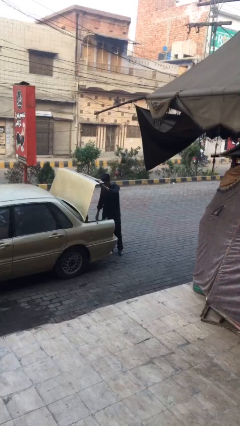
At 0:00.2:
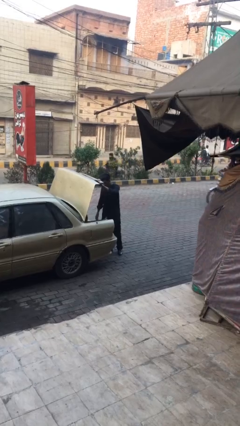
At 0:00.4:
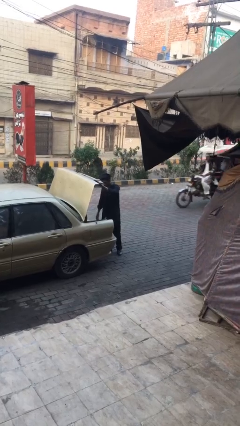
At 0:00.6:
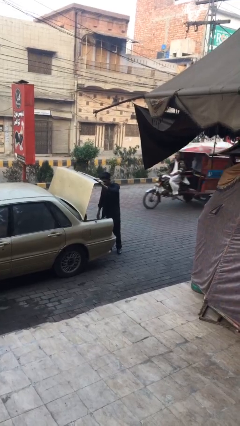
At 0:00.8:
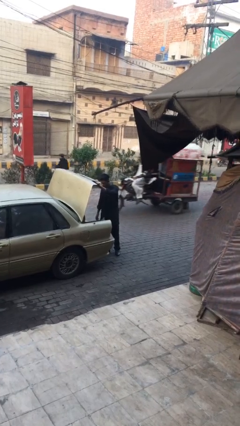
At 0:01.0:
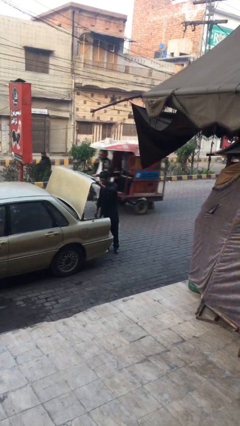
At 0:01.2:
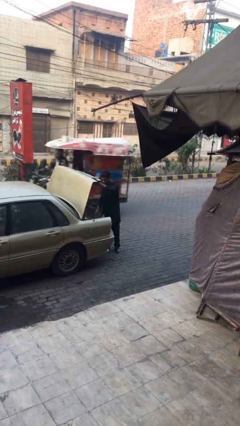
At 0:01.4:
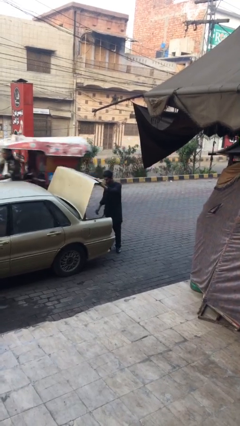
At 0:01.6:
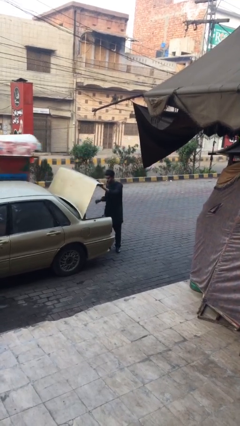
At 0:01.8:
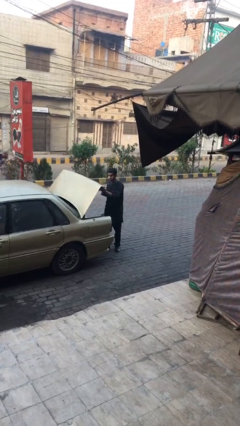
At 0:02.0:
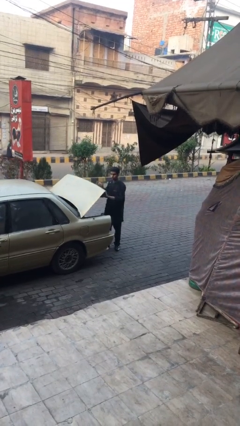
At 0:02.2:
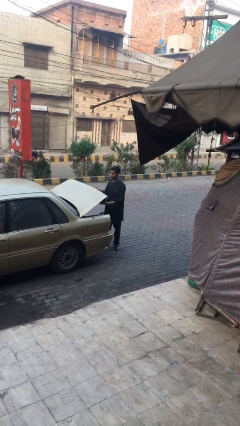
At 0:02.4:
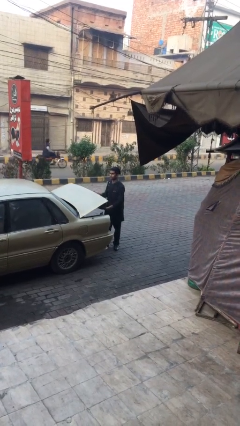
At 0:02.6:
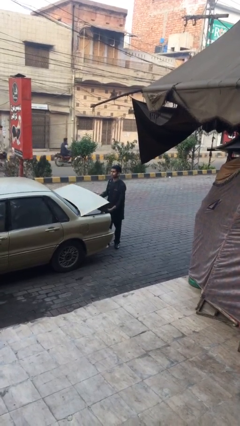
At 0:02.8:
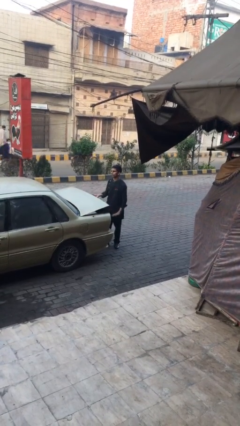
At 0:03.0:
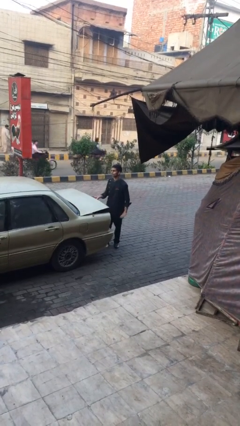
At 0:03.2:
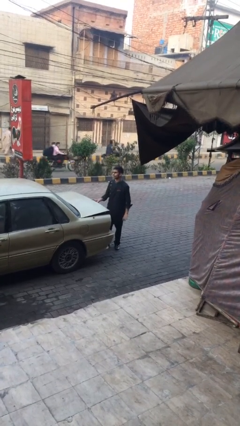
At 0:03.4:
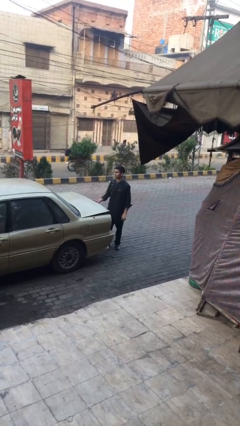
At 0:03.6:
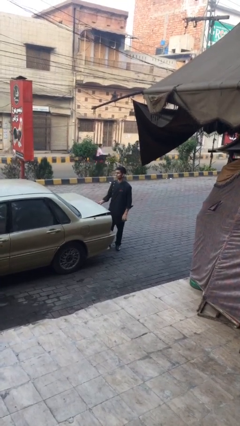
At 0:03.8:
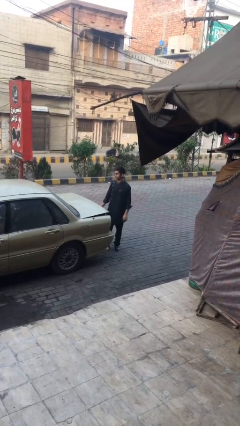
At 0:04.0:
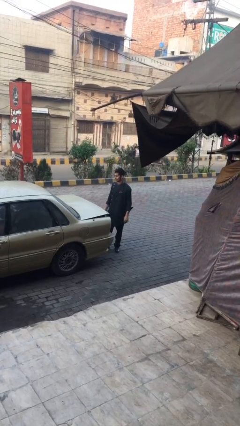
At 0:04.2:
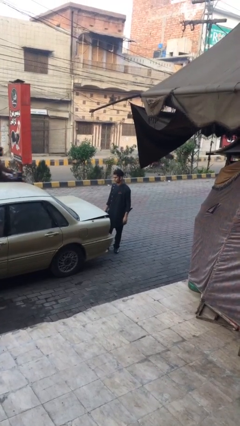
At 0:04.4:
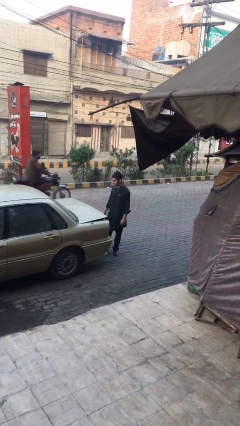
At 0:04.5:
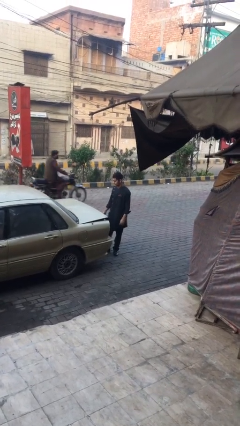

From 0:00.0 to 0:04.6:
person closes car trunk

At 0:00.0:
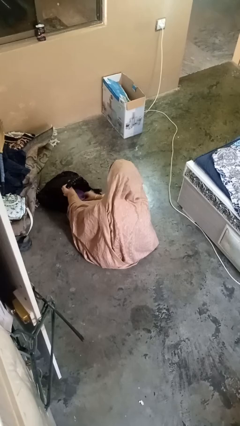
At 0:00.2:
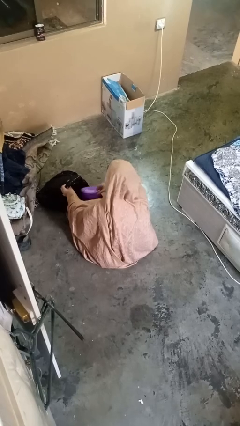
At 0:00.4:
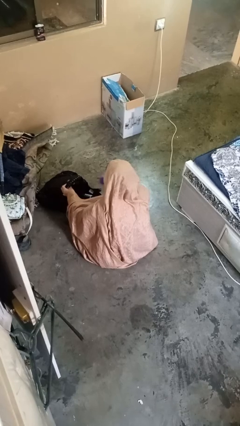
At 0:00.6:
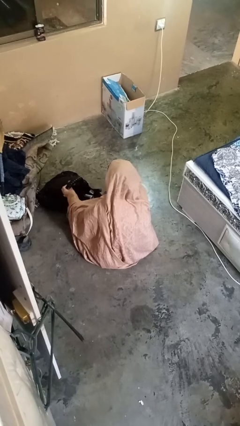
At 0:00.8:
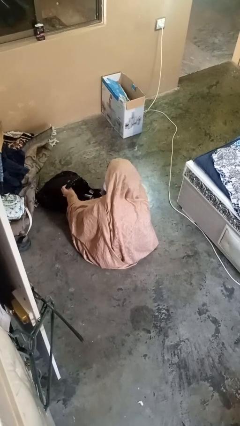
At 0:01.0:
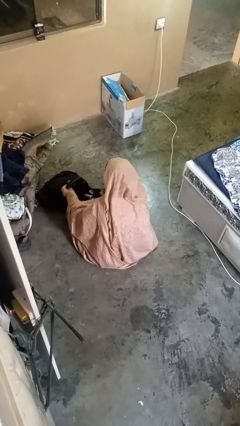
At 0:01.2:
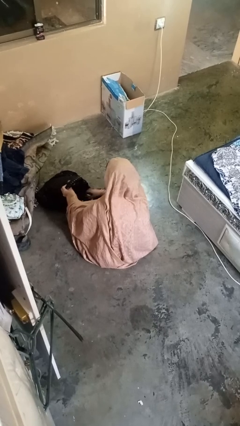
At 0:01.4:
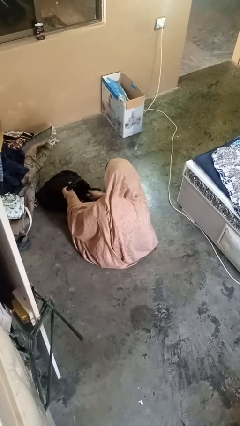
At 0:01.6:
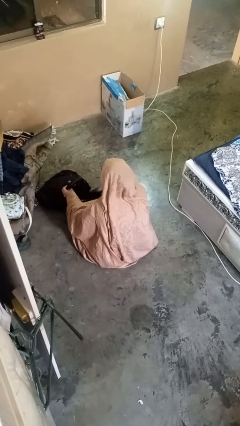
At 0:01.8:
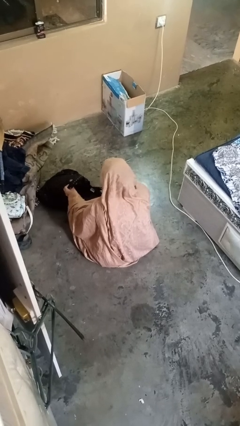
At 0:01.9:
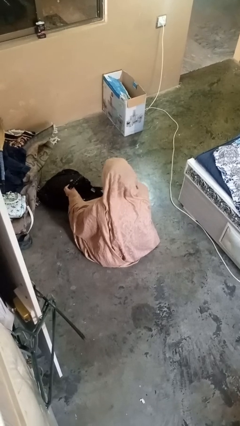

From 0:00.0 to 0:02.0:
person takes object from backpack

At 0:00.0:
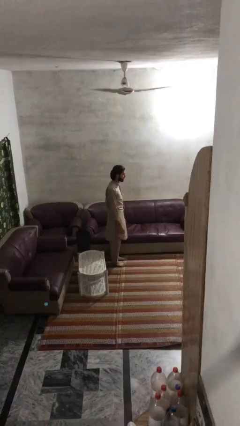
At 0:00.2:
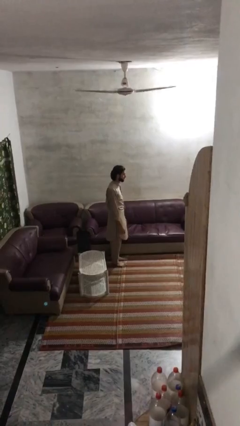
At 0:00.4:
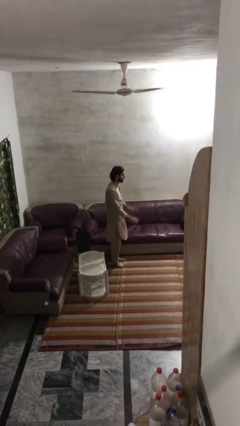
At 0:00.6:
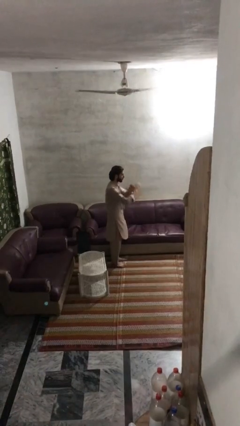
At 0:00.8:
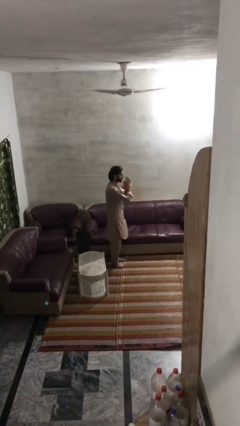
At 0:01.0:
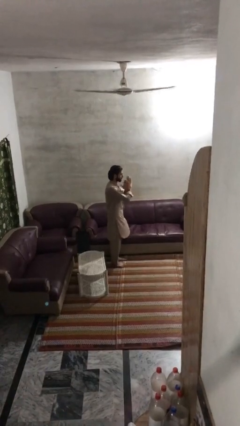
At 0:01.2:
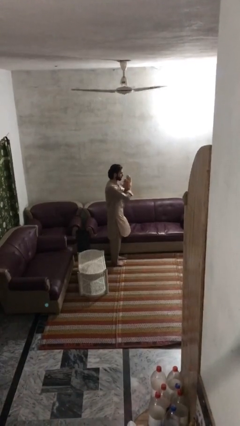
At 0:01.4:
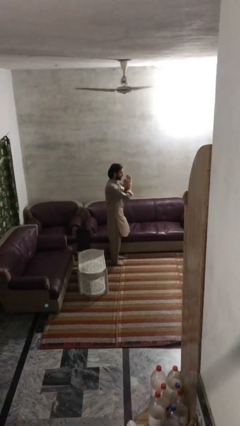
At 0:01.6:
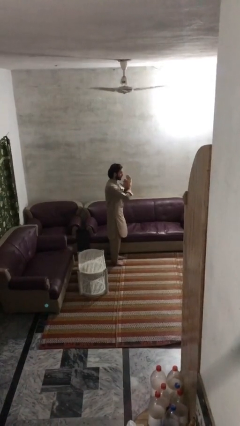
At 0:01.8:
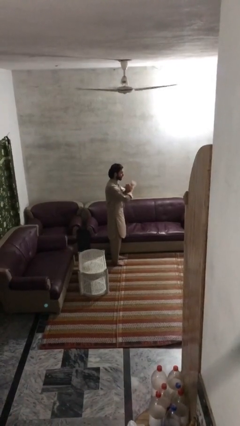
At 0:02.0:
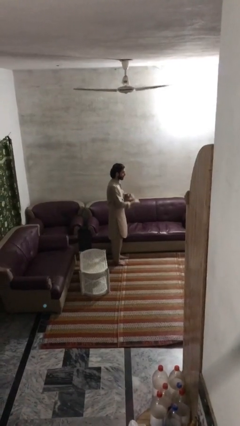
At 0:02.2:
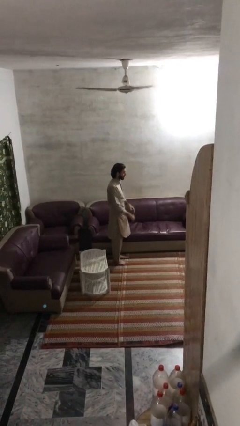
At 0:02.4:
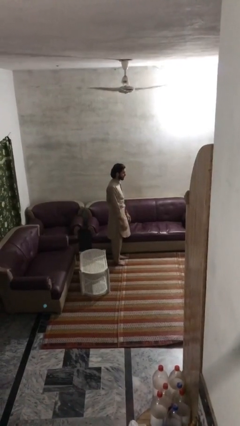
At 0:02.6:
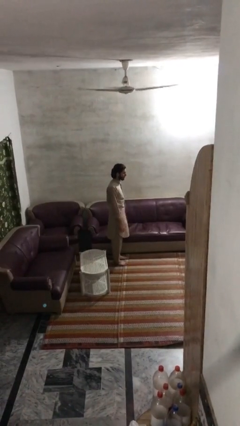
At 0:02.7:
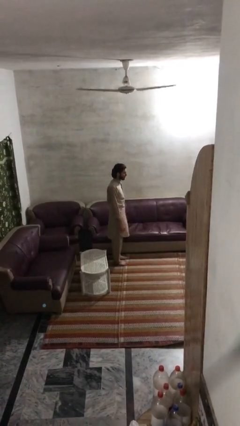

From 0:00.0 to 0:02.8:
person gestures arms x

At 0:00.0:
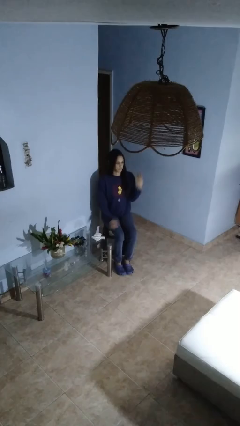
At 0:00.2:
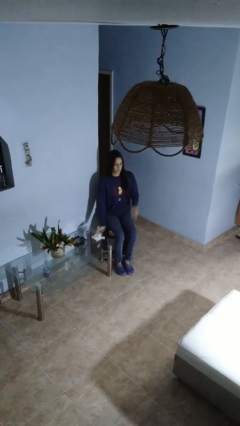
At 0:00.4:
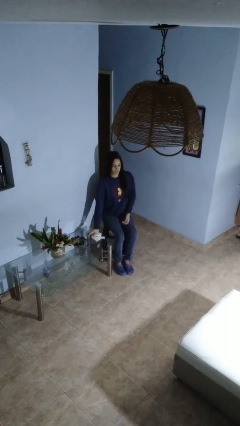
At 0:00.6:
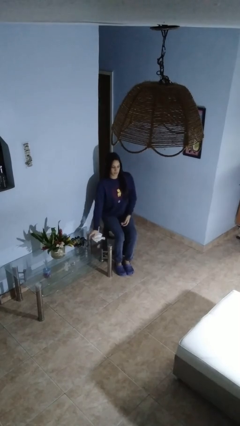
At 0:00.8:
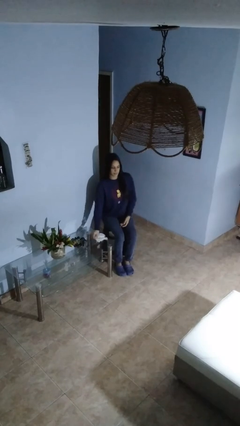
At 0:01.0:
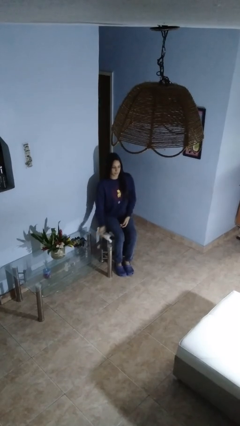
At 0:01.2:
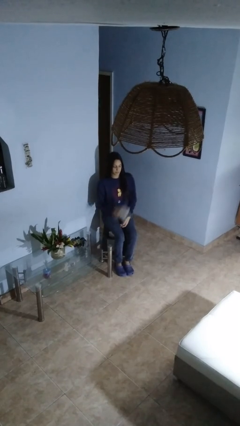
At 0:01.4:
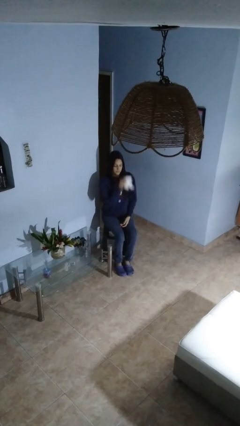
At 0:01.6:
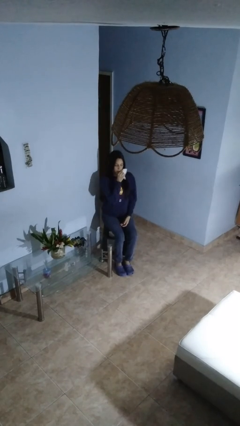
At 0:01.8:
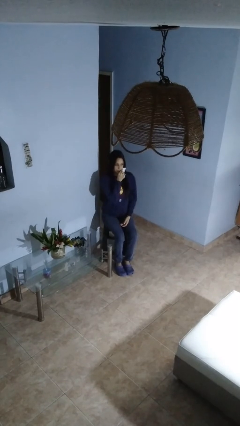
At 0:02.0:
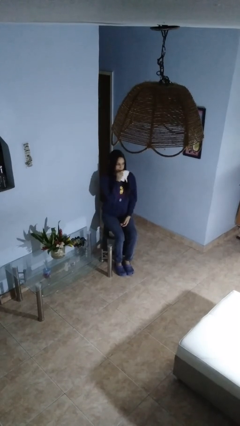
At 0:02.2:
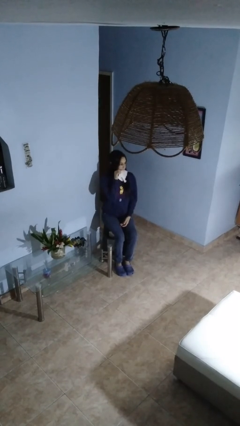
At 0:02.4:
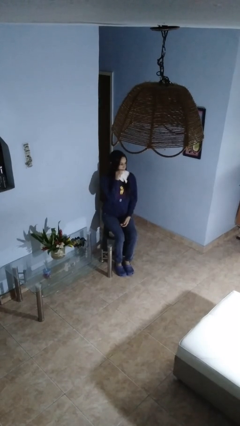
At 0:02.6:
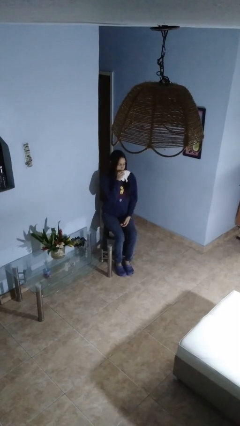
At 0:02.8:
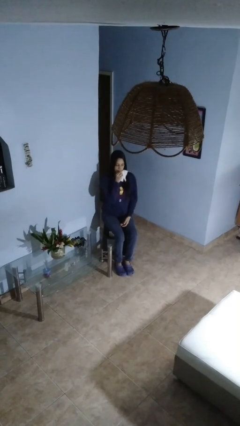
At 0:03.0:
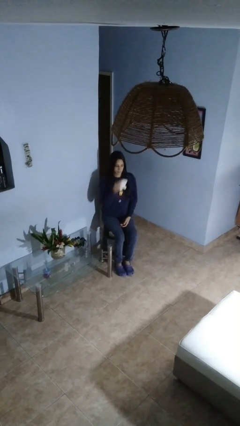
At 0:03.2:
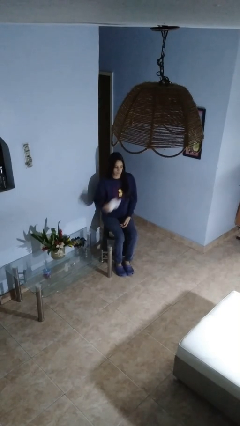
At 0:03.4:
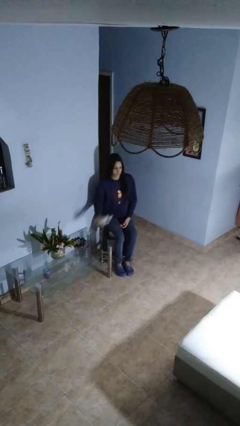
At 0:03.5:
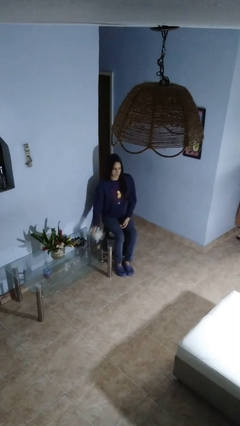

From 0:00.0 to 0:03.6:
person wipes mouth with napkin

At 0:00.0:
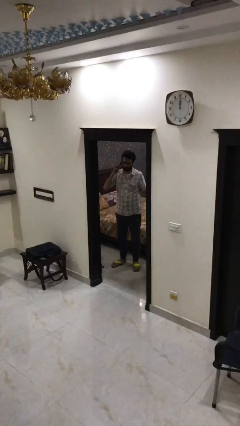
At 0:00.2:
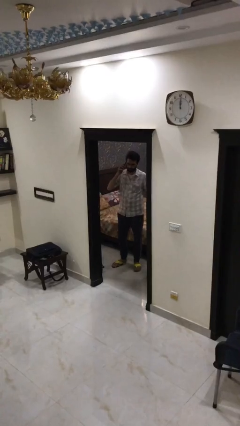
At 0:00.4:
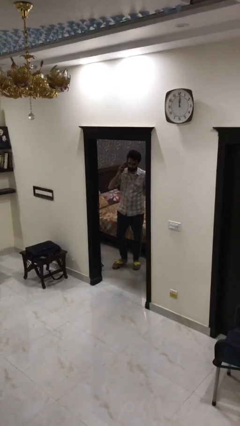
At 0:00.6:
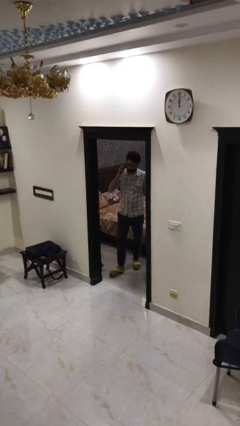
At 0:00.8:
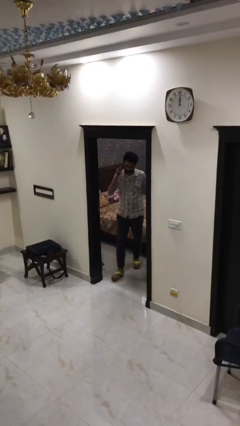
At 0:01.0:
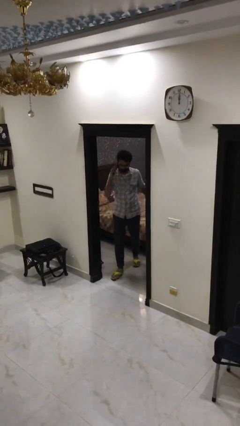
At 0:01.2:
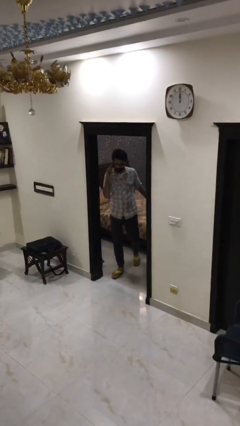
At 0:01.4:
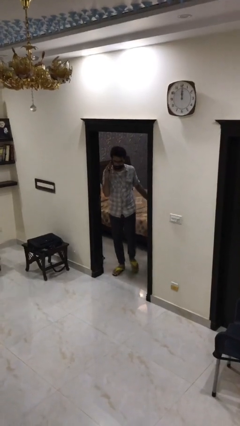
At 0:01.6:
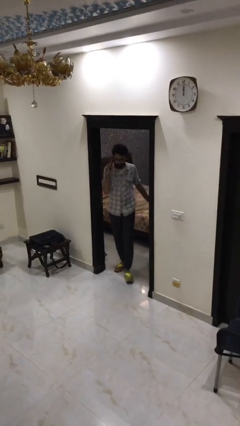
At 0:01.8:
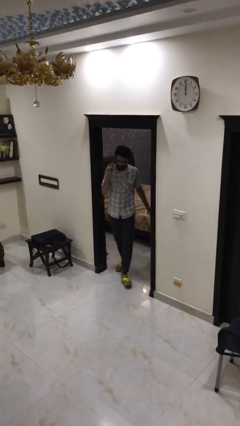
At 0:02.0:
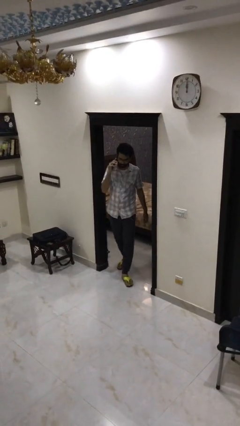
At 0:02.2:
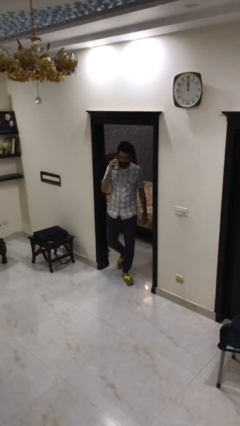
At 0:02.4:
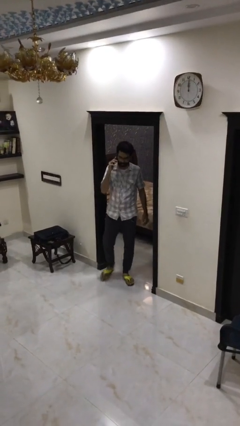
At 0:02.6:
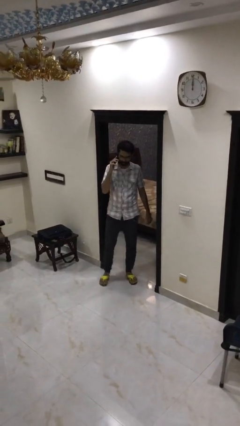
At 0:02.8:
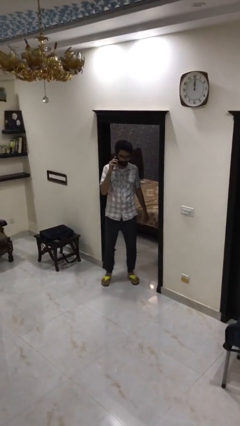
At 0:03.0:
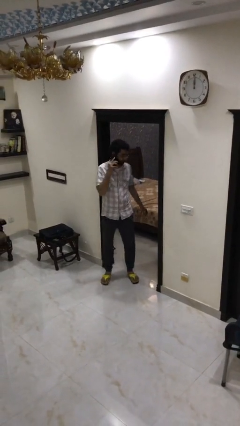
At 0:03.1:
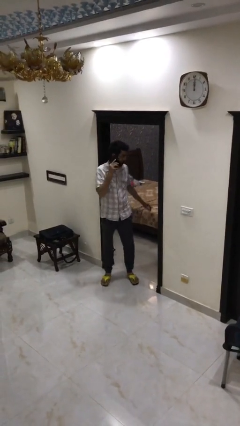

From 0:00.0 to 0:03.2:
person enters scene through structure

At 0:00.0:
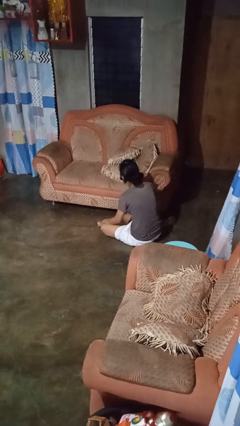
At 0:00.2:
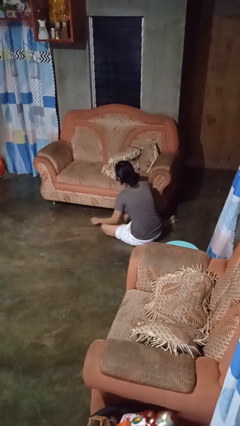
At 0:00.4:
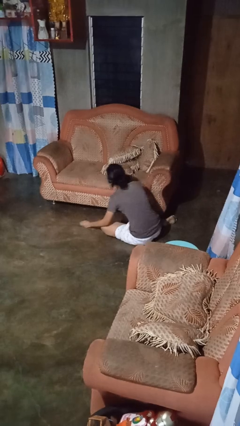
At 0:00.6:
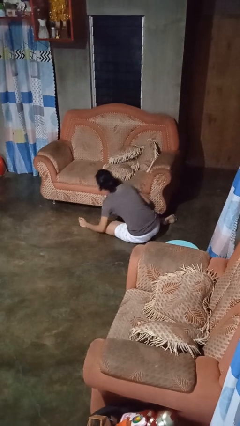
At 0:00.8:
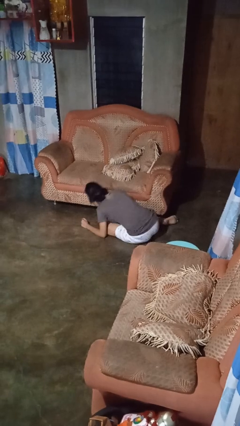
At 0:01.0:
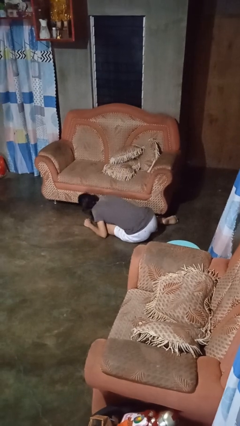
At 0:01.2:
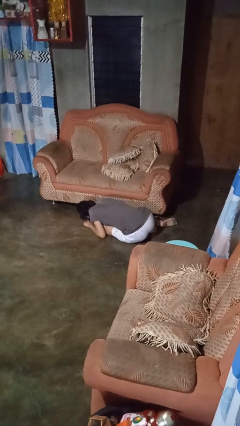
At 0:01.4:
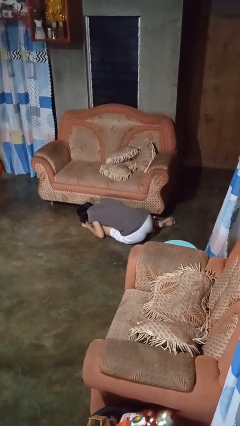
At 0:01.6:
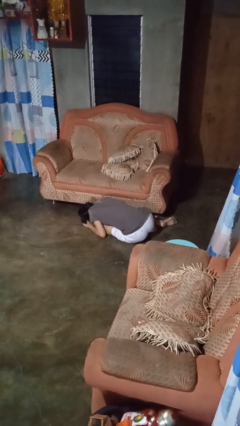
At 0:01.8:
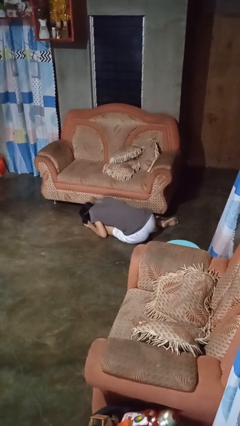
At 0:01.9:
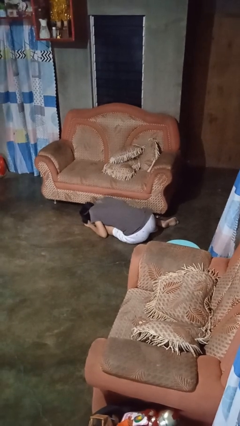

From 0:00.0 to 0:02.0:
person searches under couch
